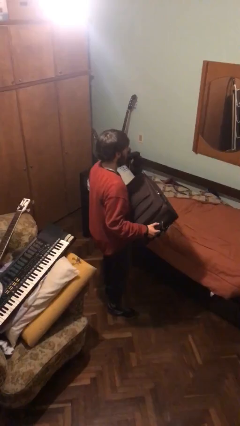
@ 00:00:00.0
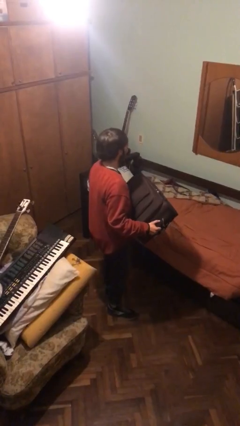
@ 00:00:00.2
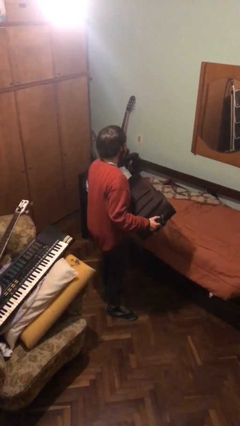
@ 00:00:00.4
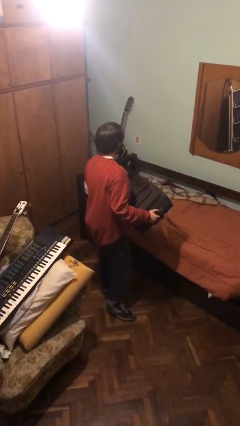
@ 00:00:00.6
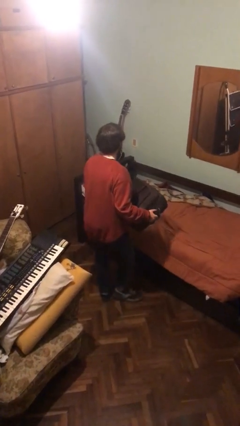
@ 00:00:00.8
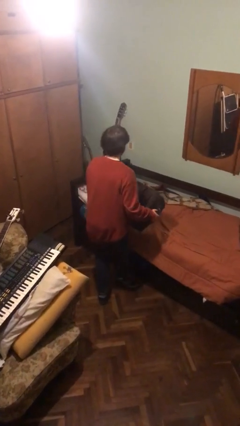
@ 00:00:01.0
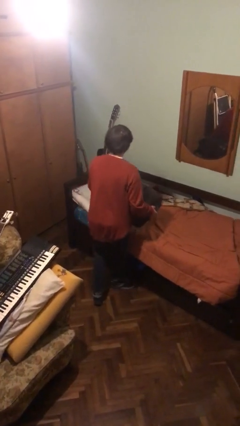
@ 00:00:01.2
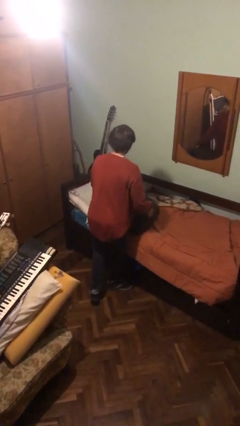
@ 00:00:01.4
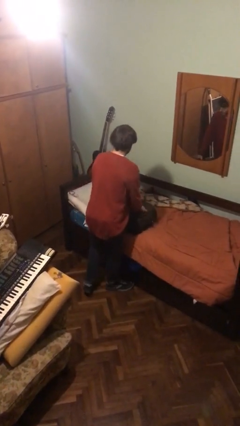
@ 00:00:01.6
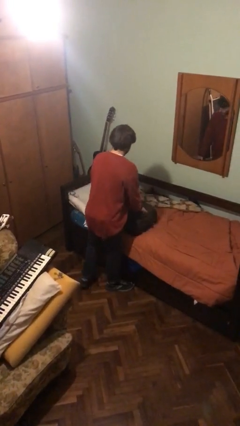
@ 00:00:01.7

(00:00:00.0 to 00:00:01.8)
person puts down object on bed

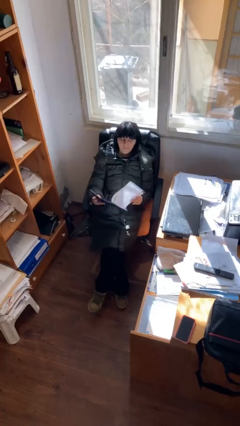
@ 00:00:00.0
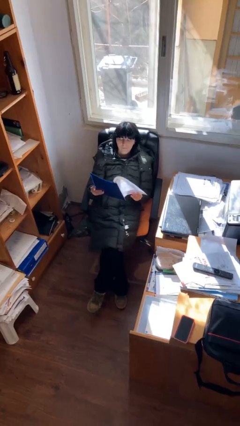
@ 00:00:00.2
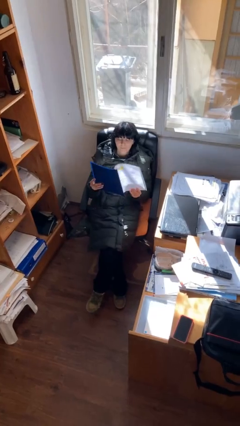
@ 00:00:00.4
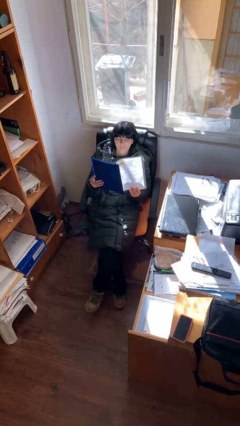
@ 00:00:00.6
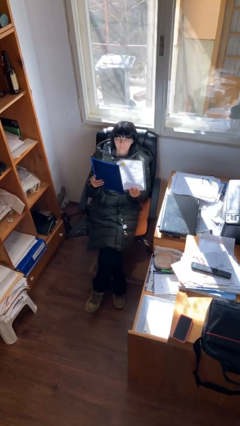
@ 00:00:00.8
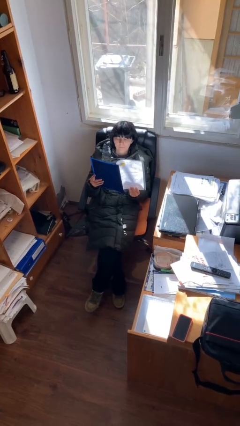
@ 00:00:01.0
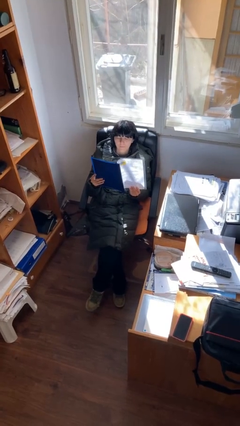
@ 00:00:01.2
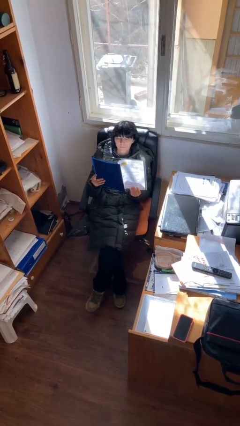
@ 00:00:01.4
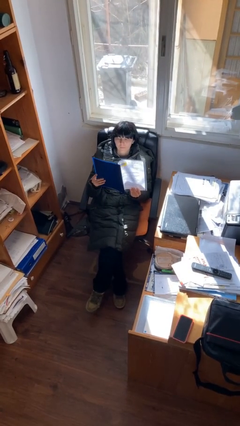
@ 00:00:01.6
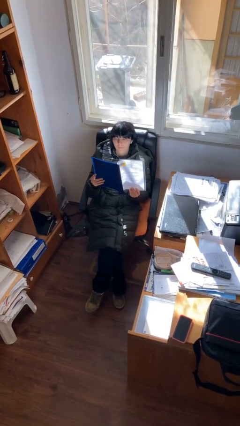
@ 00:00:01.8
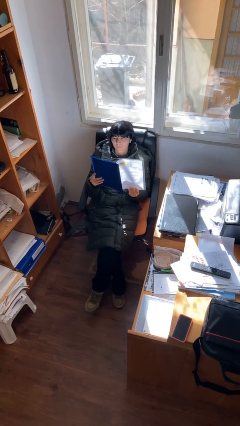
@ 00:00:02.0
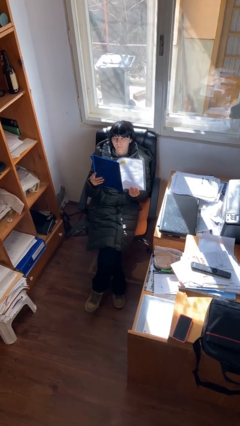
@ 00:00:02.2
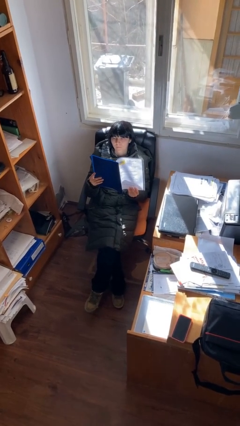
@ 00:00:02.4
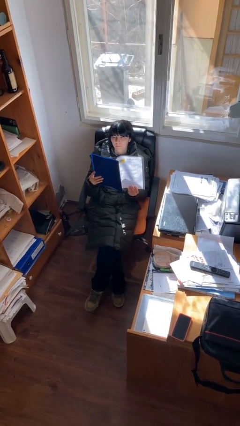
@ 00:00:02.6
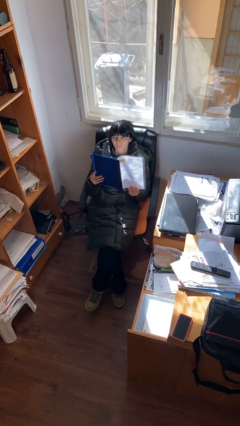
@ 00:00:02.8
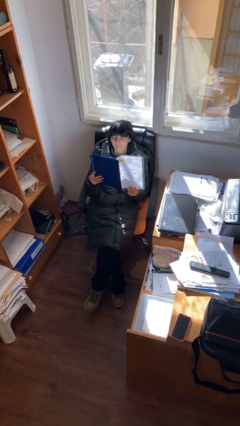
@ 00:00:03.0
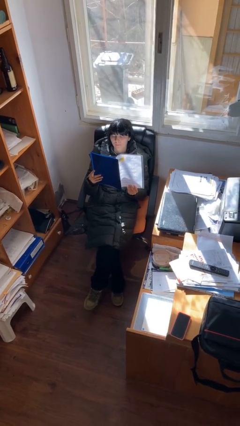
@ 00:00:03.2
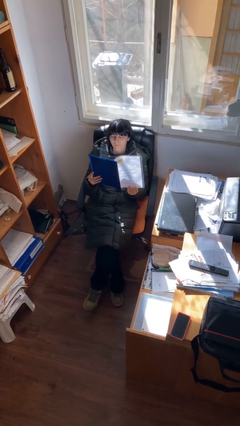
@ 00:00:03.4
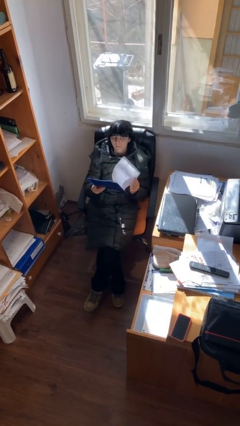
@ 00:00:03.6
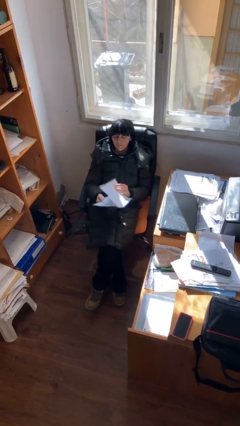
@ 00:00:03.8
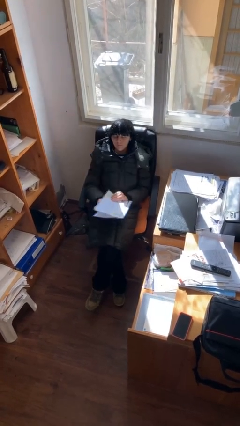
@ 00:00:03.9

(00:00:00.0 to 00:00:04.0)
person reads document

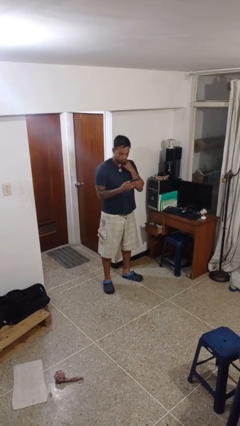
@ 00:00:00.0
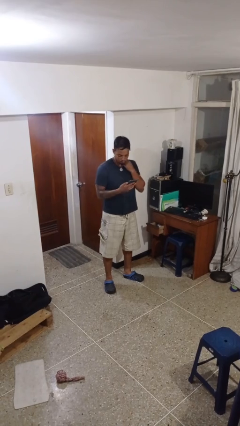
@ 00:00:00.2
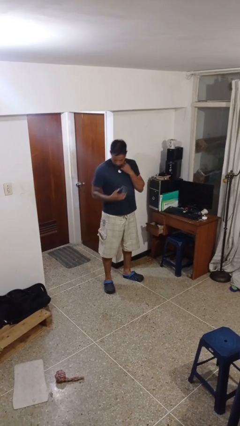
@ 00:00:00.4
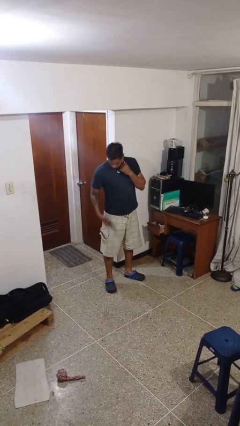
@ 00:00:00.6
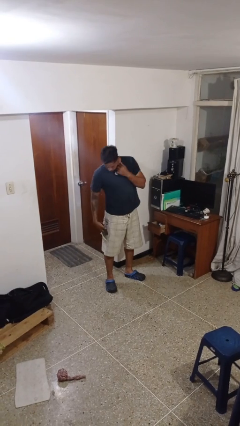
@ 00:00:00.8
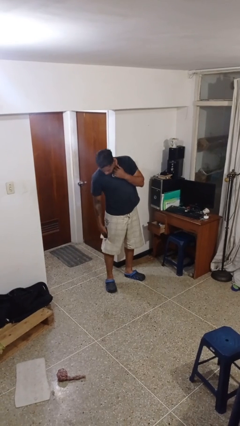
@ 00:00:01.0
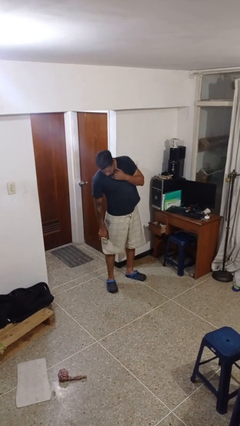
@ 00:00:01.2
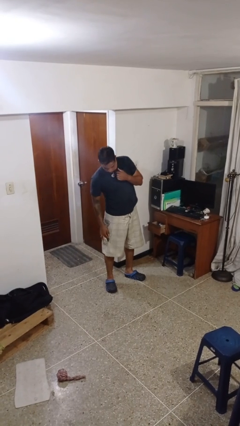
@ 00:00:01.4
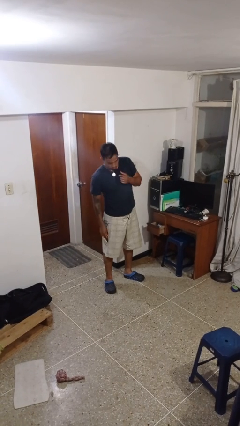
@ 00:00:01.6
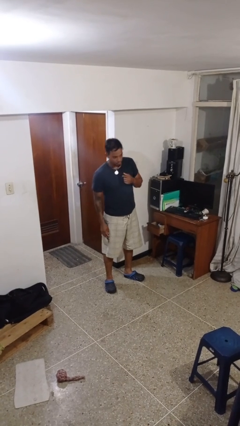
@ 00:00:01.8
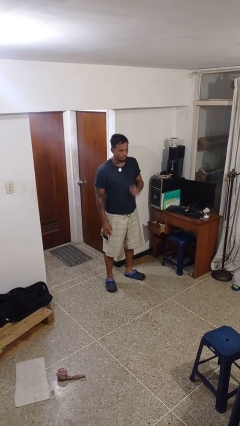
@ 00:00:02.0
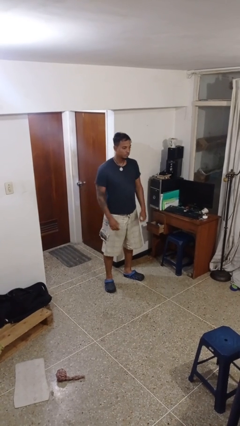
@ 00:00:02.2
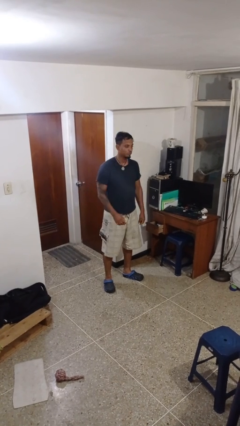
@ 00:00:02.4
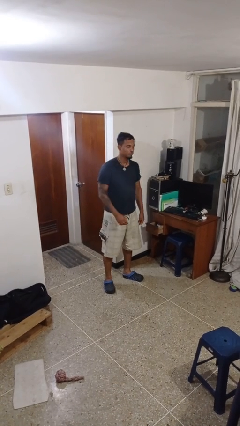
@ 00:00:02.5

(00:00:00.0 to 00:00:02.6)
person puts phone into pocket

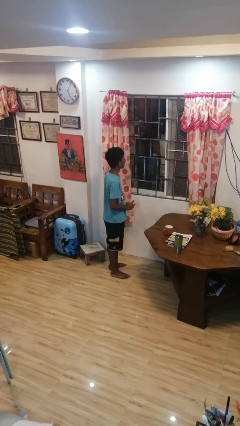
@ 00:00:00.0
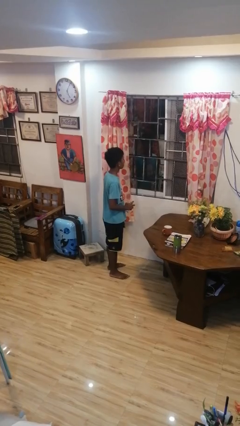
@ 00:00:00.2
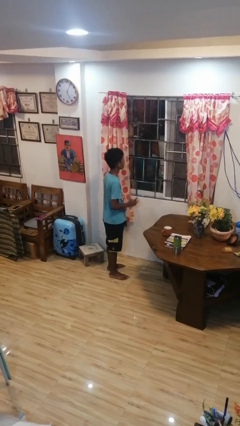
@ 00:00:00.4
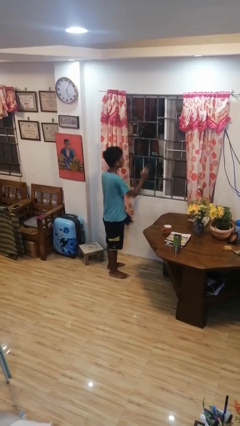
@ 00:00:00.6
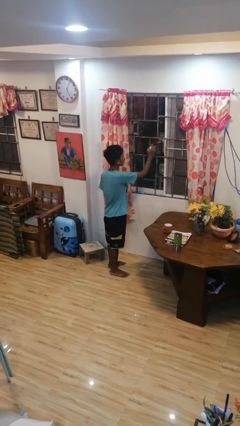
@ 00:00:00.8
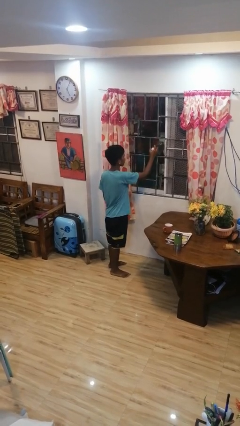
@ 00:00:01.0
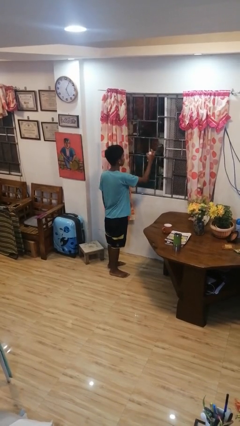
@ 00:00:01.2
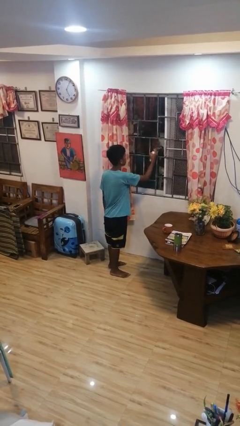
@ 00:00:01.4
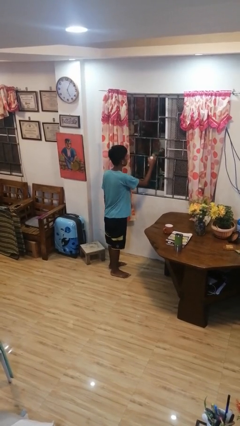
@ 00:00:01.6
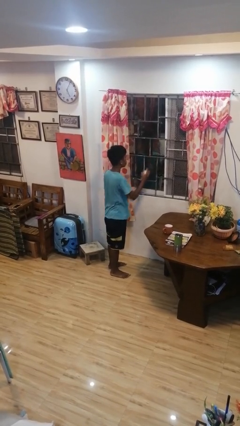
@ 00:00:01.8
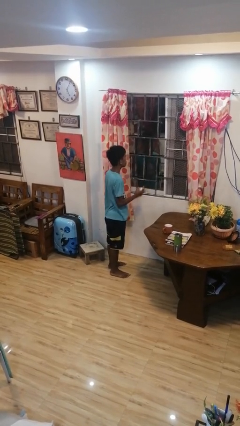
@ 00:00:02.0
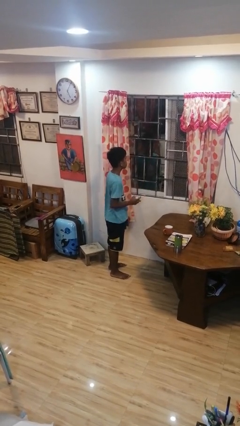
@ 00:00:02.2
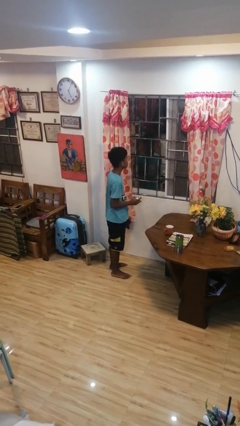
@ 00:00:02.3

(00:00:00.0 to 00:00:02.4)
person sprays from bottle

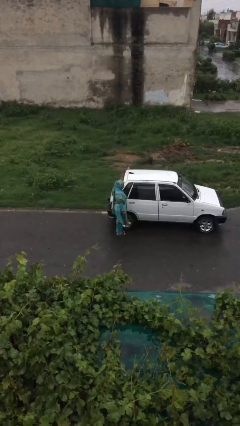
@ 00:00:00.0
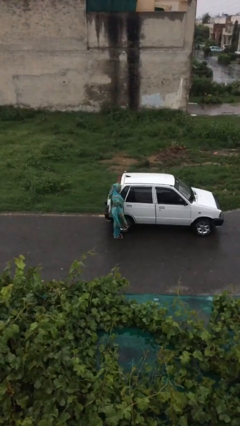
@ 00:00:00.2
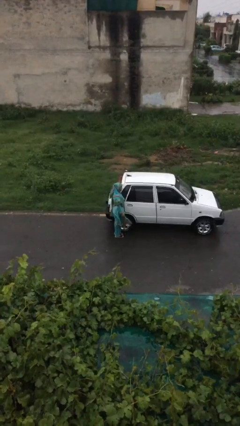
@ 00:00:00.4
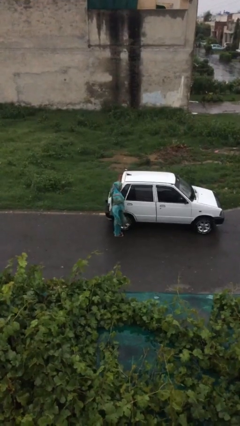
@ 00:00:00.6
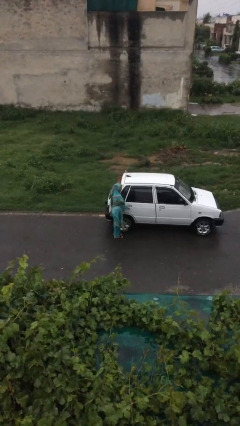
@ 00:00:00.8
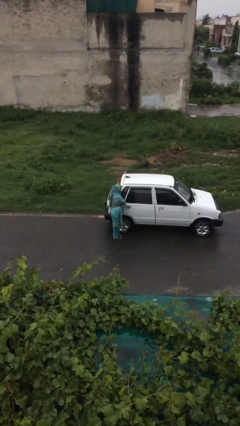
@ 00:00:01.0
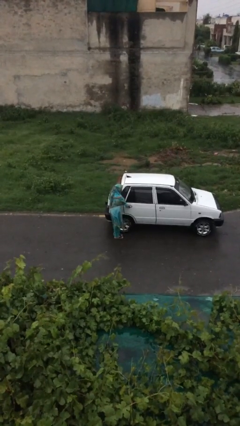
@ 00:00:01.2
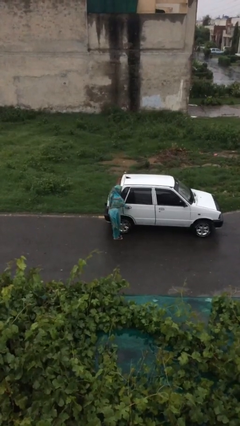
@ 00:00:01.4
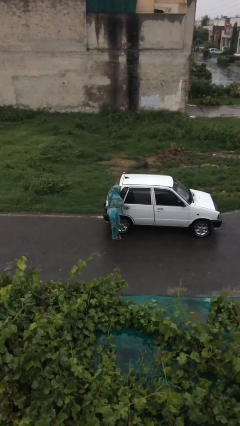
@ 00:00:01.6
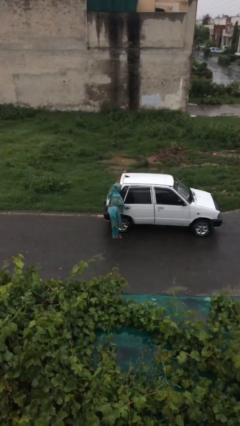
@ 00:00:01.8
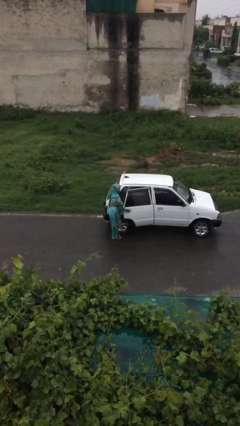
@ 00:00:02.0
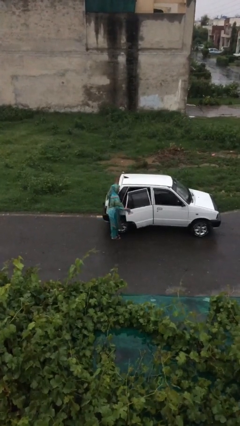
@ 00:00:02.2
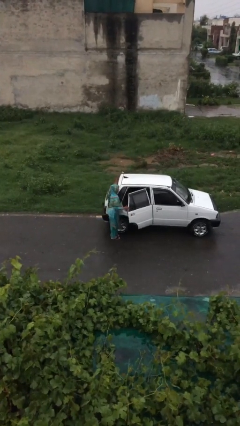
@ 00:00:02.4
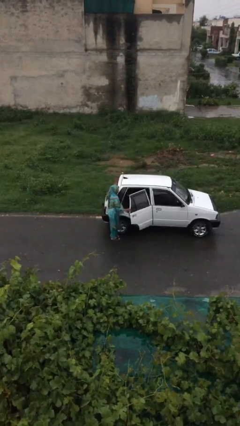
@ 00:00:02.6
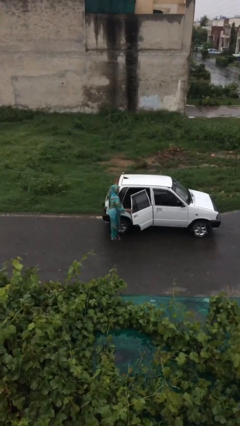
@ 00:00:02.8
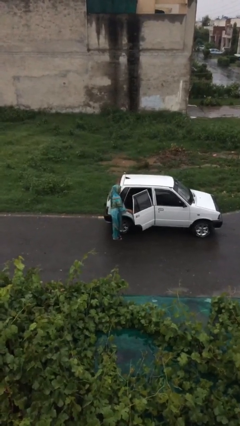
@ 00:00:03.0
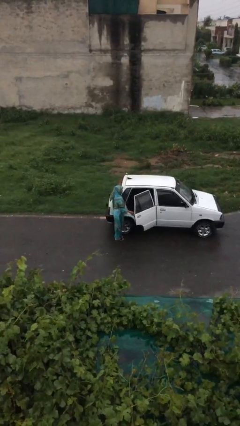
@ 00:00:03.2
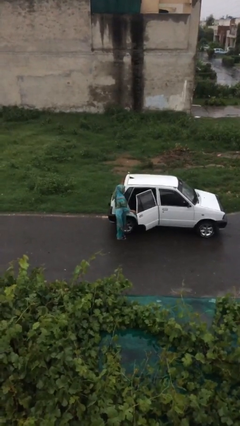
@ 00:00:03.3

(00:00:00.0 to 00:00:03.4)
person opens car door

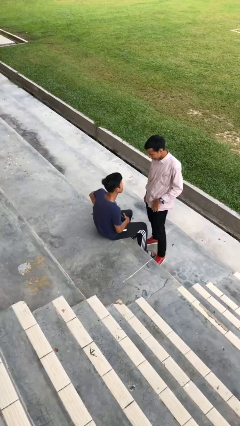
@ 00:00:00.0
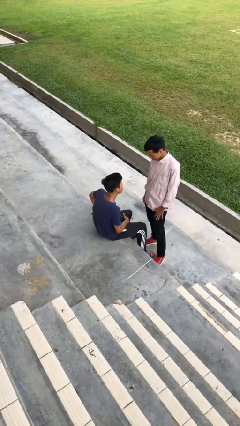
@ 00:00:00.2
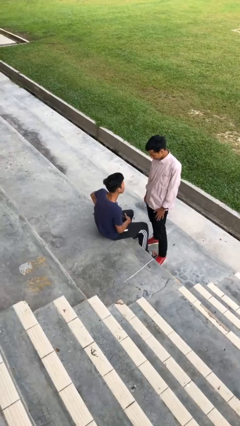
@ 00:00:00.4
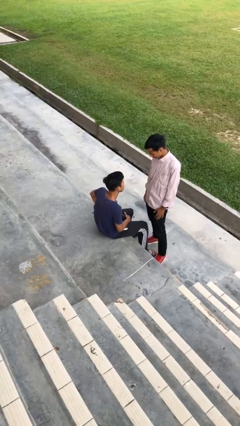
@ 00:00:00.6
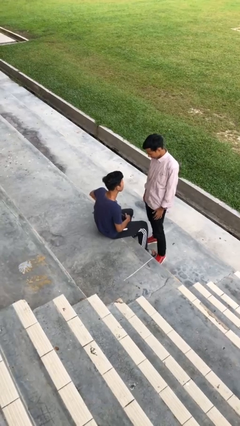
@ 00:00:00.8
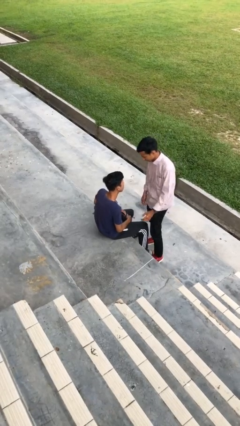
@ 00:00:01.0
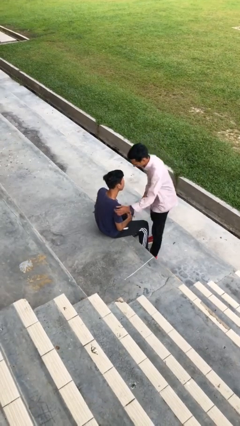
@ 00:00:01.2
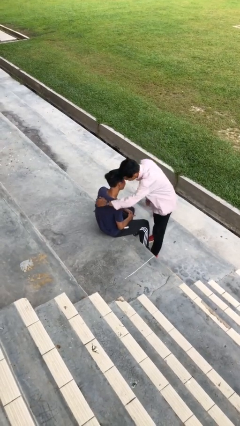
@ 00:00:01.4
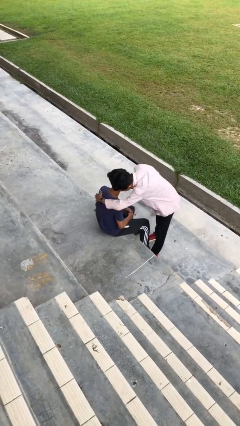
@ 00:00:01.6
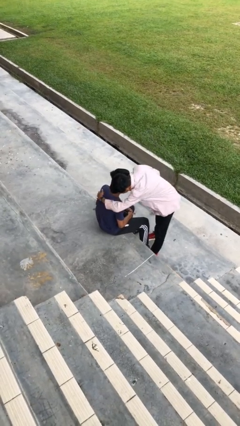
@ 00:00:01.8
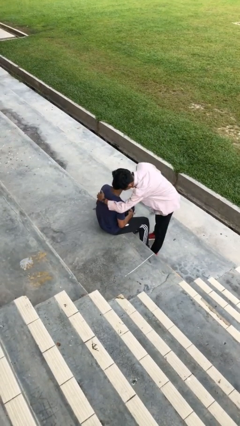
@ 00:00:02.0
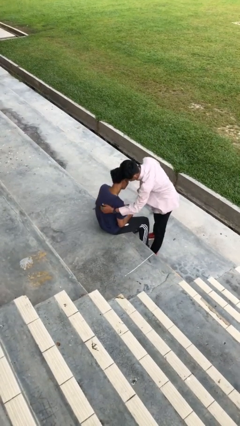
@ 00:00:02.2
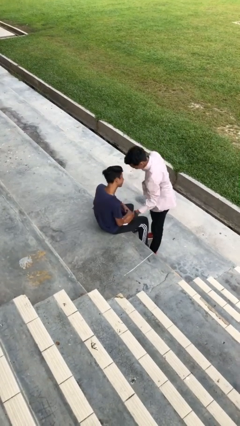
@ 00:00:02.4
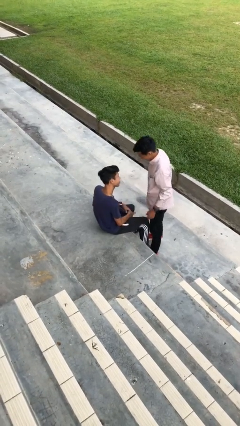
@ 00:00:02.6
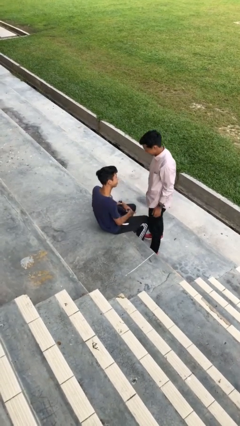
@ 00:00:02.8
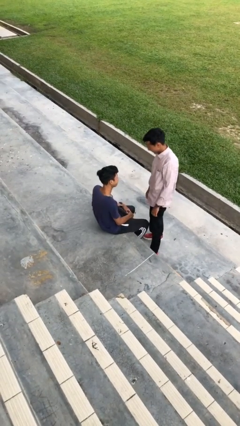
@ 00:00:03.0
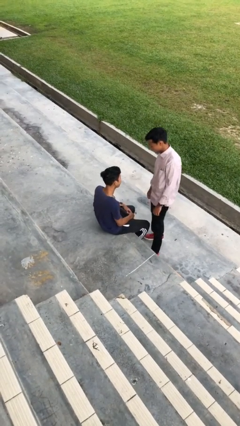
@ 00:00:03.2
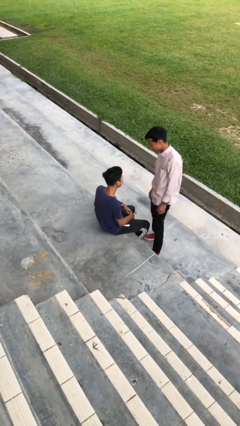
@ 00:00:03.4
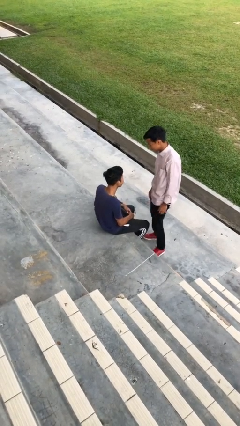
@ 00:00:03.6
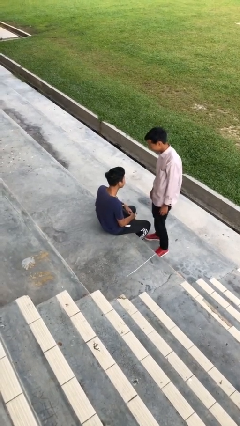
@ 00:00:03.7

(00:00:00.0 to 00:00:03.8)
person embraces person
